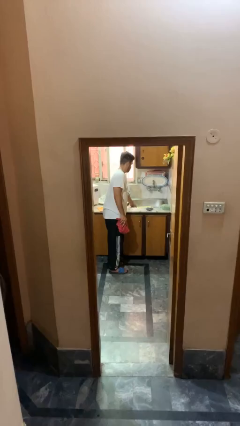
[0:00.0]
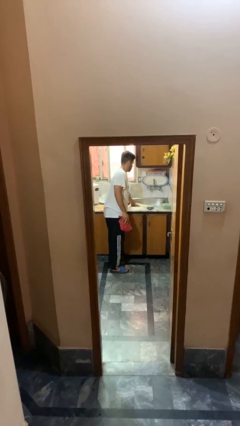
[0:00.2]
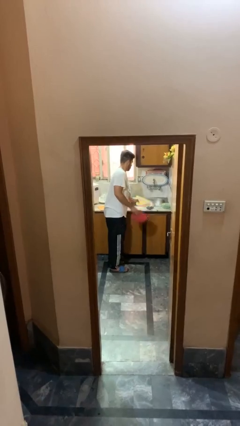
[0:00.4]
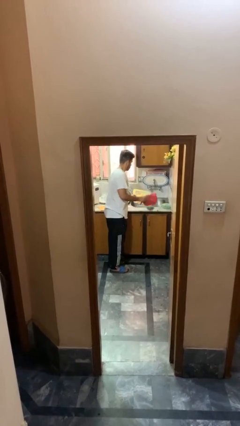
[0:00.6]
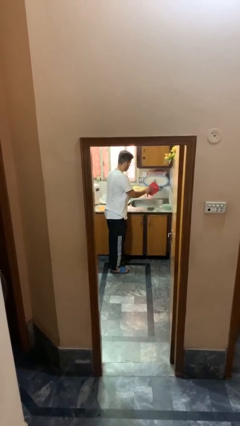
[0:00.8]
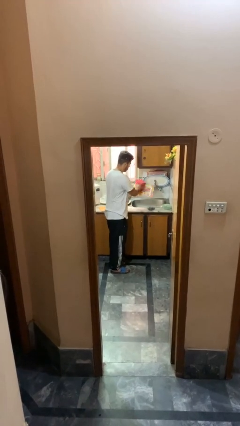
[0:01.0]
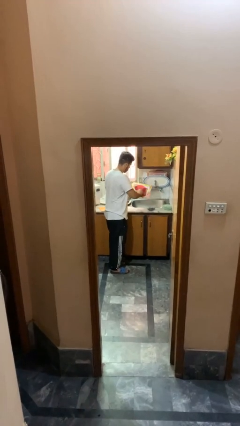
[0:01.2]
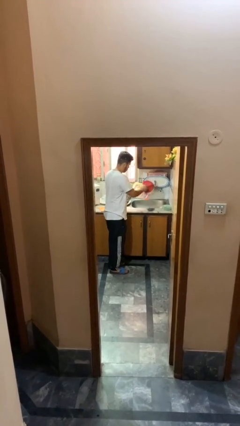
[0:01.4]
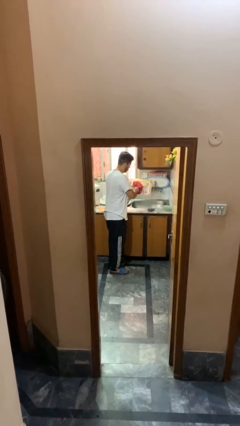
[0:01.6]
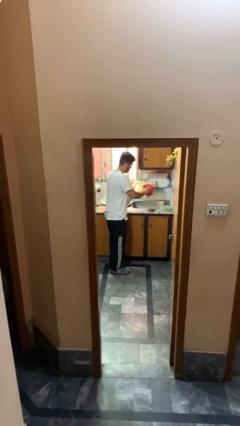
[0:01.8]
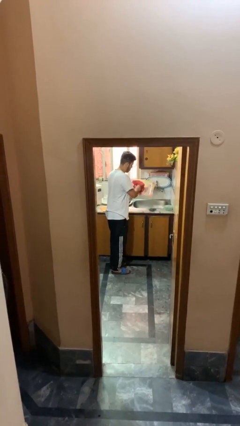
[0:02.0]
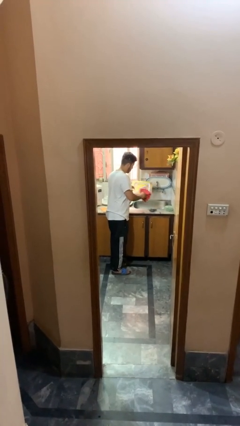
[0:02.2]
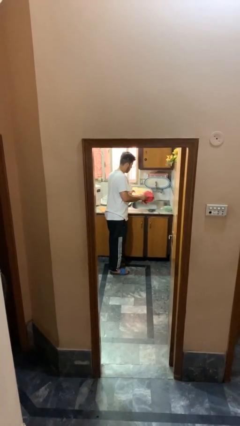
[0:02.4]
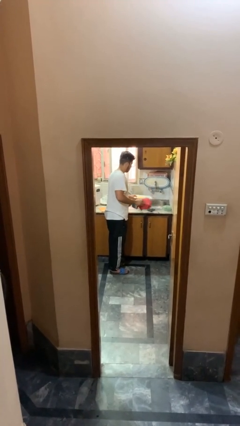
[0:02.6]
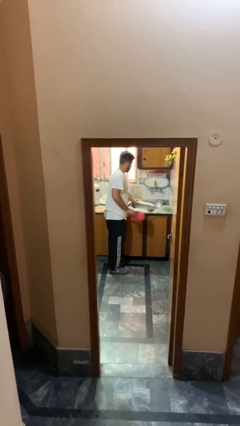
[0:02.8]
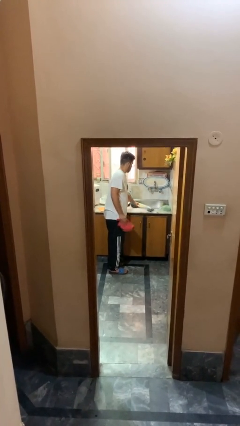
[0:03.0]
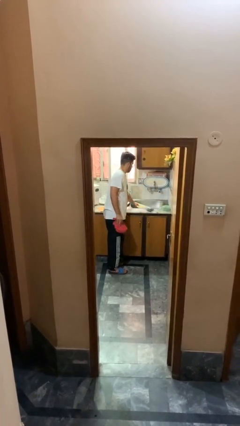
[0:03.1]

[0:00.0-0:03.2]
person dries dish

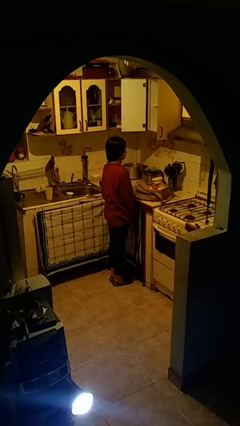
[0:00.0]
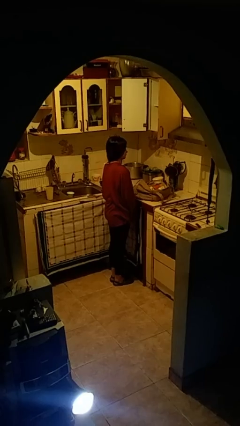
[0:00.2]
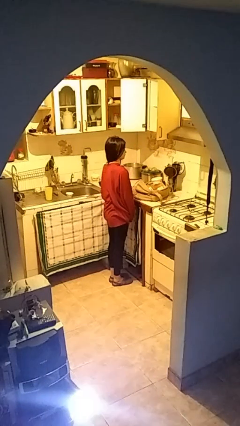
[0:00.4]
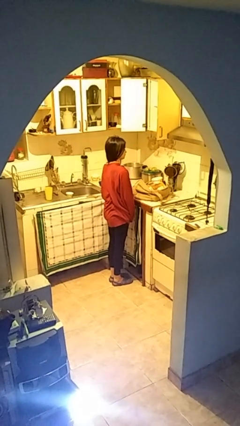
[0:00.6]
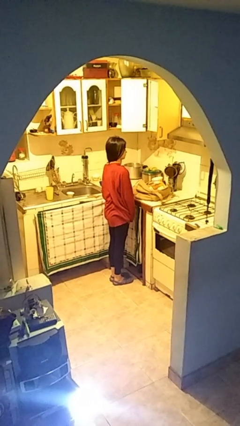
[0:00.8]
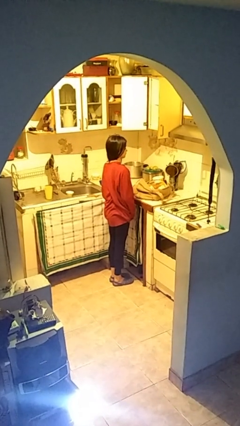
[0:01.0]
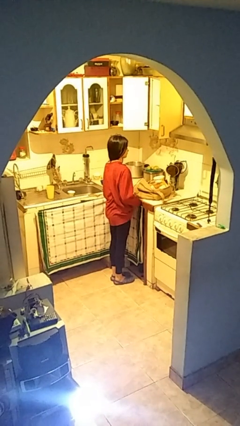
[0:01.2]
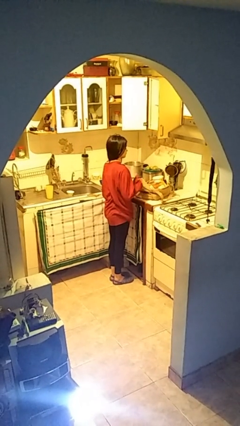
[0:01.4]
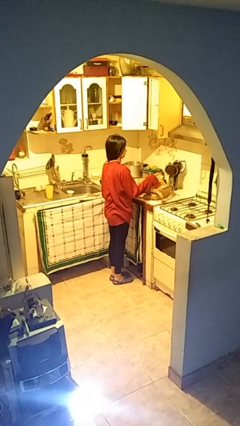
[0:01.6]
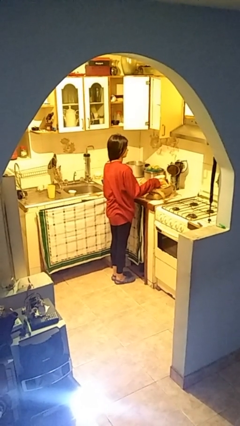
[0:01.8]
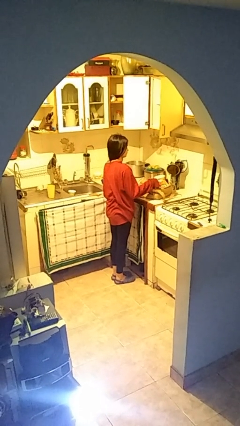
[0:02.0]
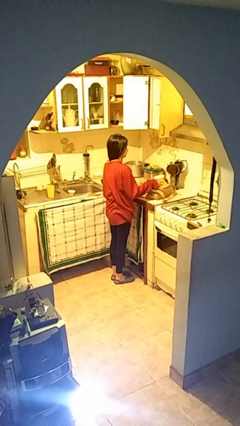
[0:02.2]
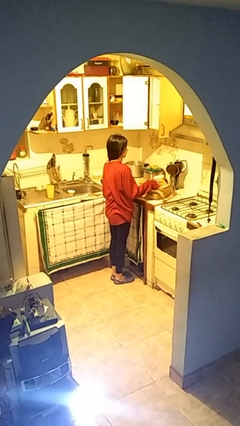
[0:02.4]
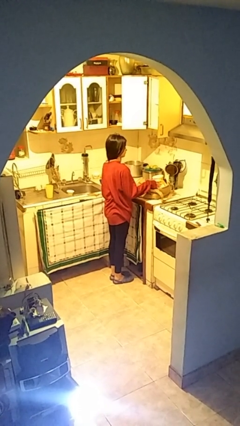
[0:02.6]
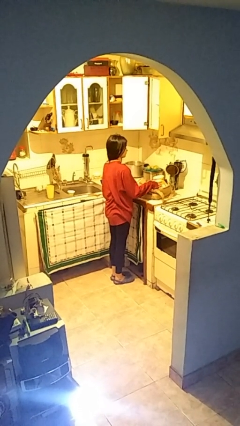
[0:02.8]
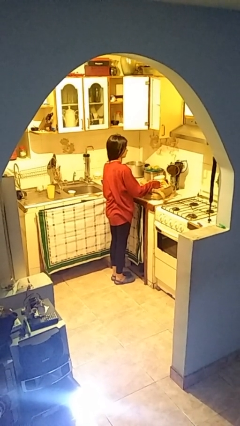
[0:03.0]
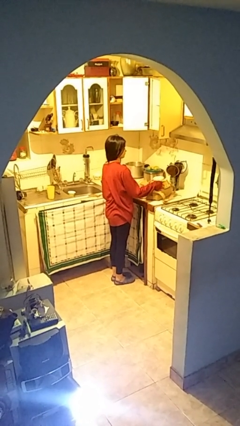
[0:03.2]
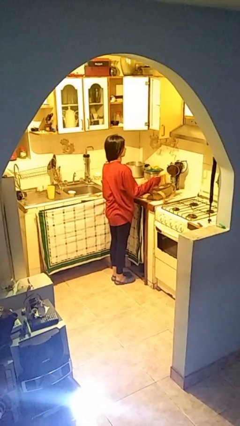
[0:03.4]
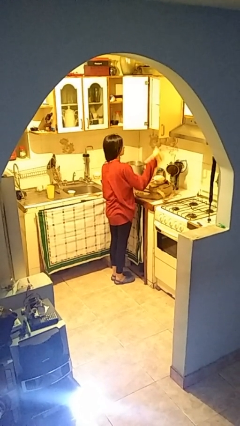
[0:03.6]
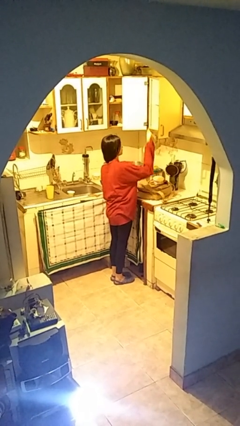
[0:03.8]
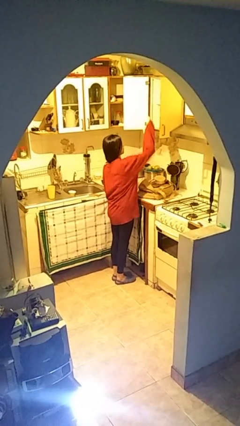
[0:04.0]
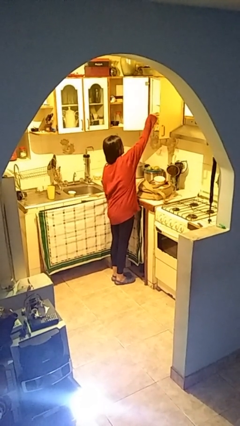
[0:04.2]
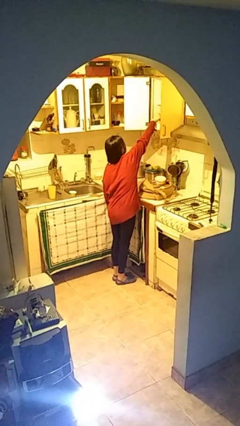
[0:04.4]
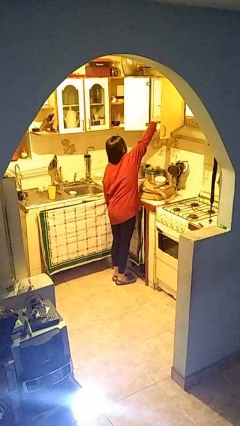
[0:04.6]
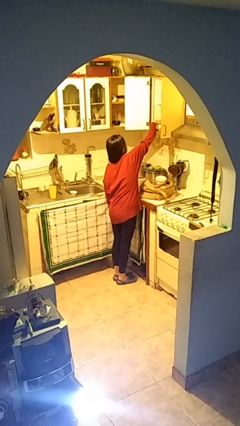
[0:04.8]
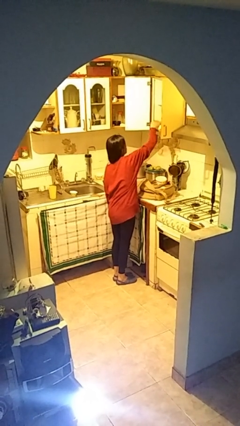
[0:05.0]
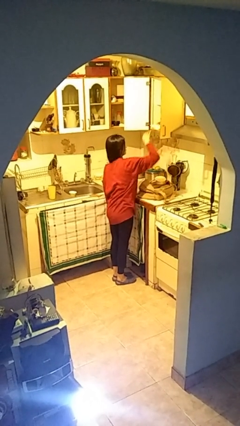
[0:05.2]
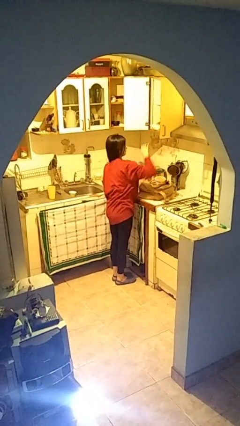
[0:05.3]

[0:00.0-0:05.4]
person loads groceries into cabinet

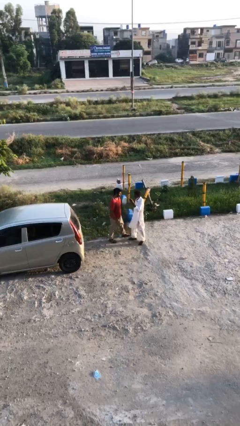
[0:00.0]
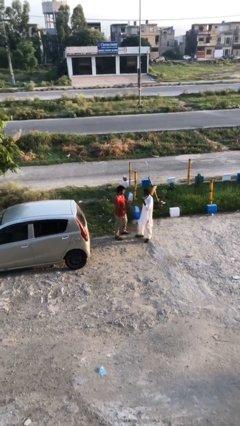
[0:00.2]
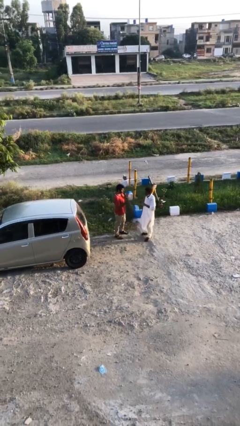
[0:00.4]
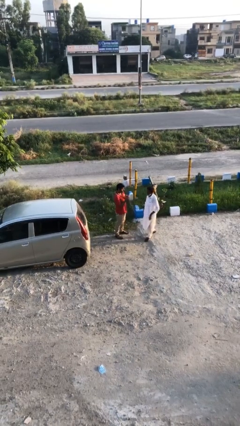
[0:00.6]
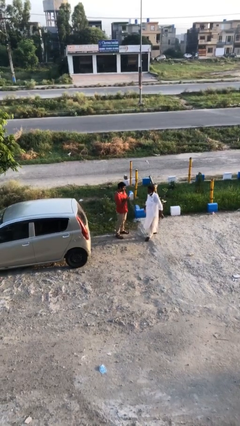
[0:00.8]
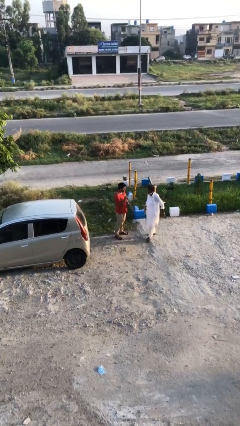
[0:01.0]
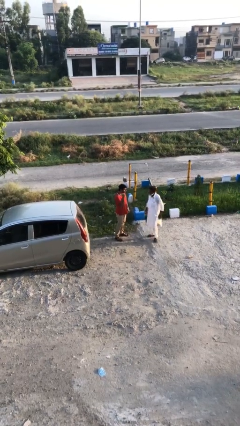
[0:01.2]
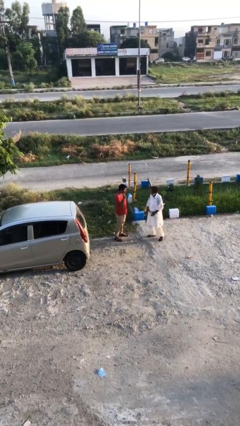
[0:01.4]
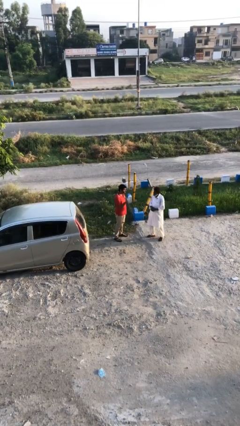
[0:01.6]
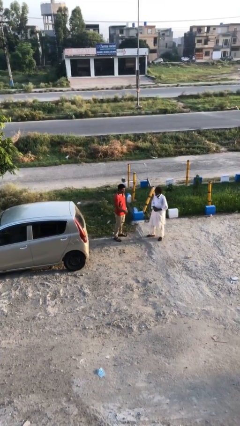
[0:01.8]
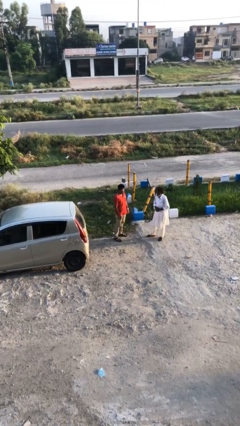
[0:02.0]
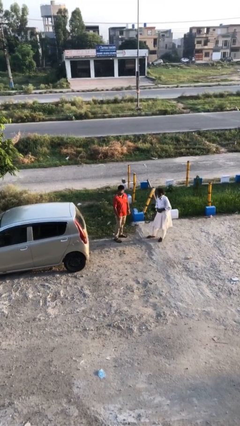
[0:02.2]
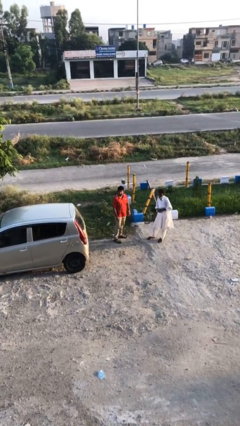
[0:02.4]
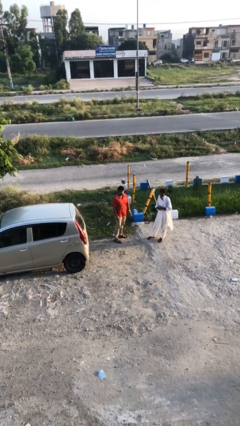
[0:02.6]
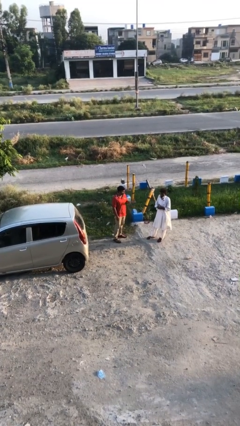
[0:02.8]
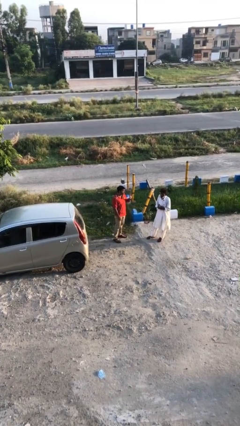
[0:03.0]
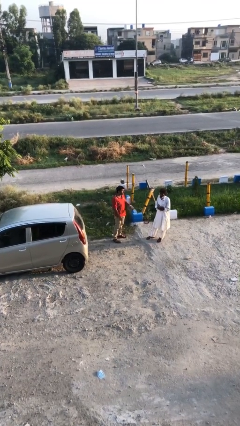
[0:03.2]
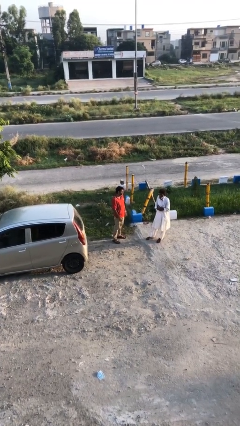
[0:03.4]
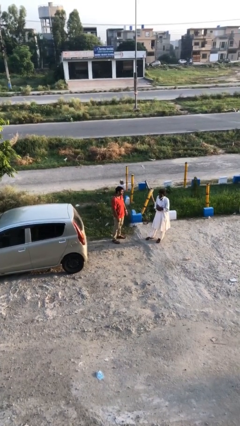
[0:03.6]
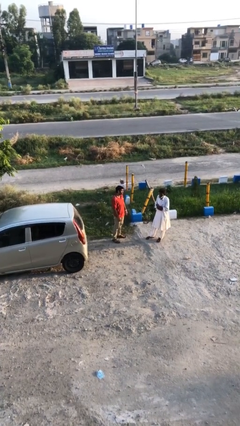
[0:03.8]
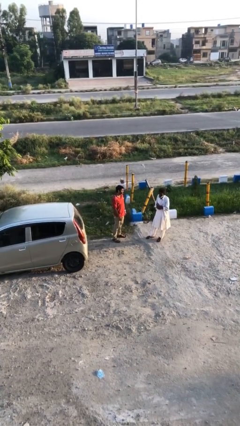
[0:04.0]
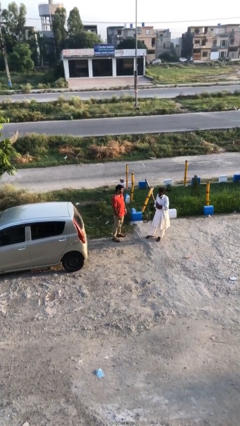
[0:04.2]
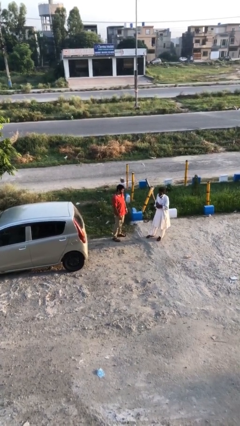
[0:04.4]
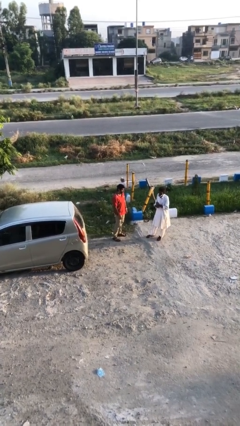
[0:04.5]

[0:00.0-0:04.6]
person talks to person

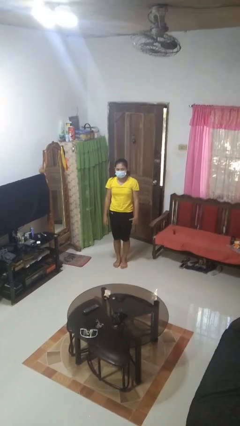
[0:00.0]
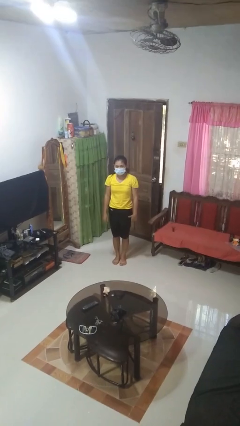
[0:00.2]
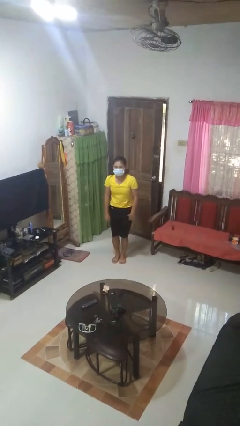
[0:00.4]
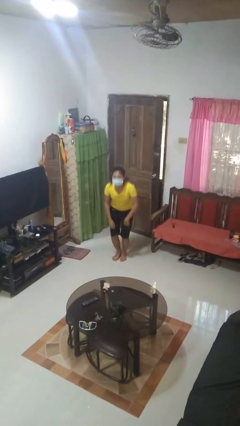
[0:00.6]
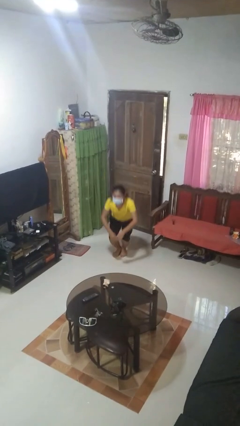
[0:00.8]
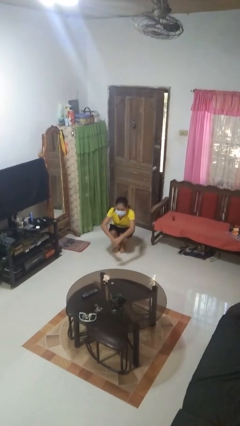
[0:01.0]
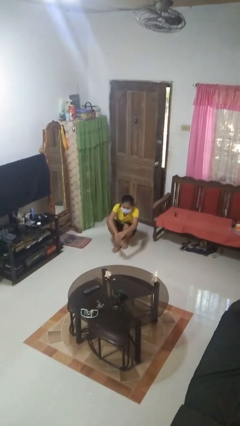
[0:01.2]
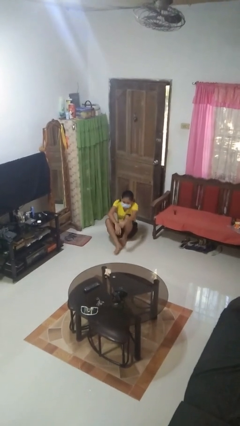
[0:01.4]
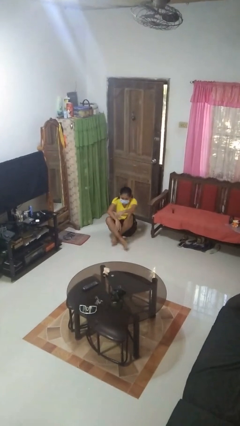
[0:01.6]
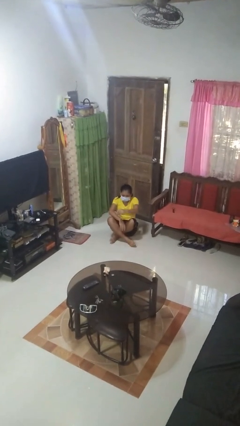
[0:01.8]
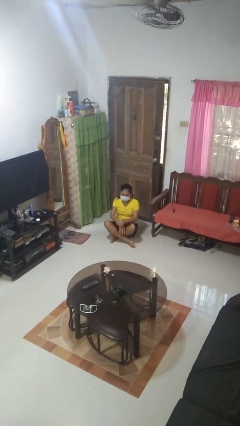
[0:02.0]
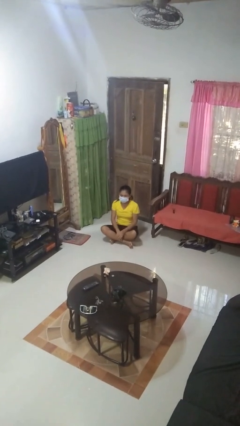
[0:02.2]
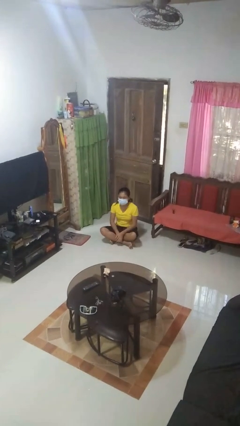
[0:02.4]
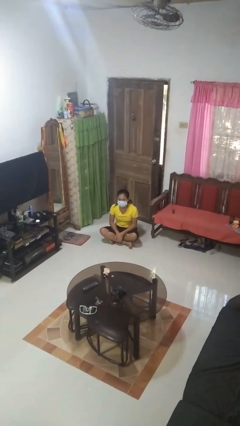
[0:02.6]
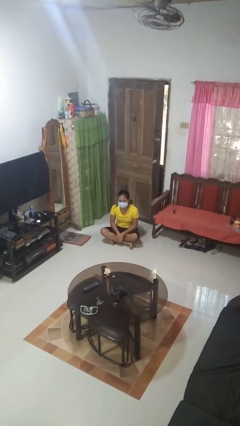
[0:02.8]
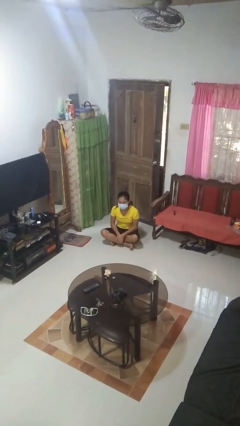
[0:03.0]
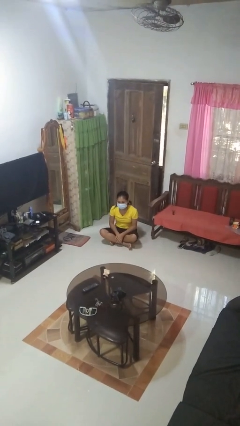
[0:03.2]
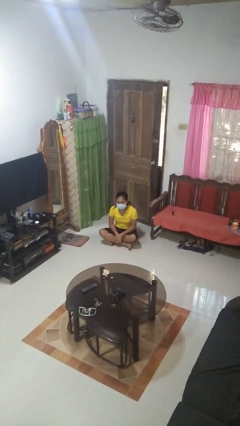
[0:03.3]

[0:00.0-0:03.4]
person sits crisscross

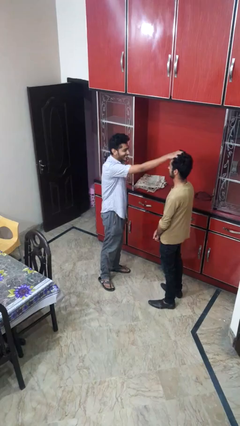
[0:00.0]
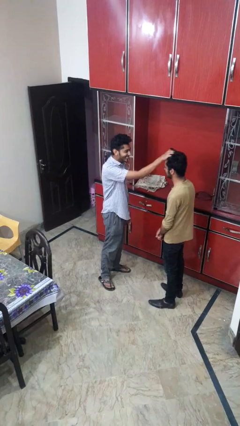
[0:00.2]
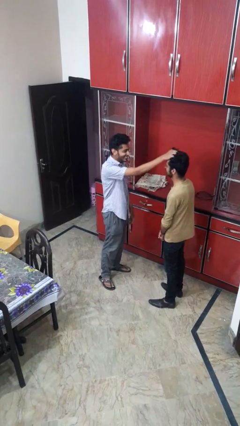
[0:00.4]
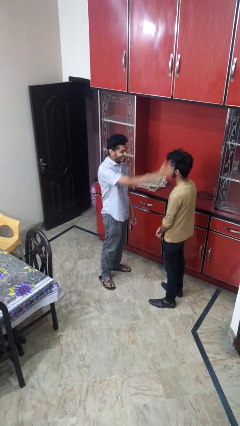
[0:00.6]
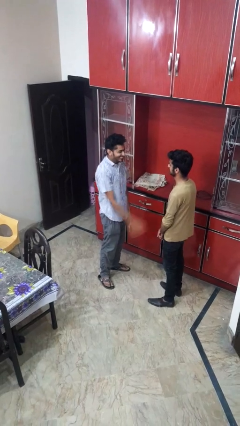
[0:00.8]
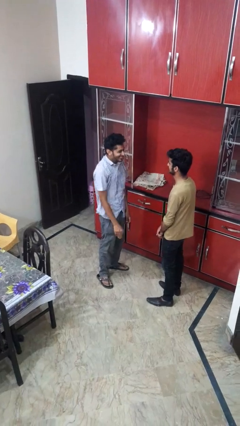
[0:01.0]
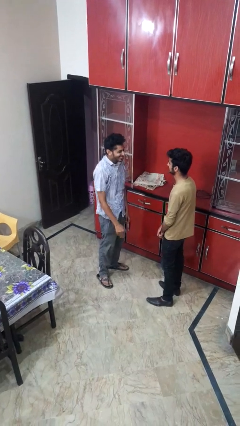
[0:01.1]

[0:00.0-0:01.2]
person grabs person by hair

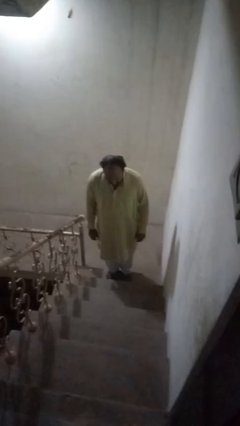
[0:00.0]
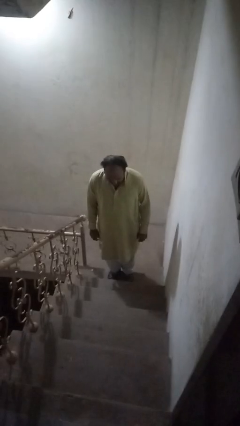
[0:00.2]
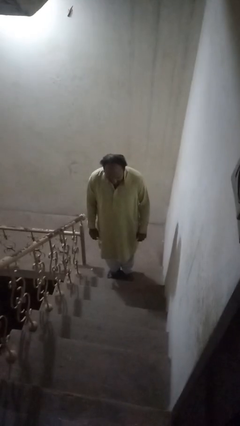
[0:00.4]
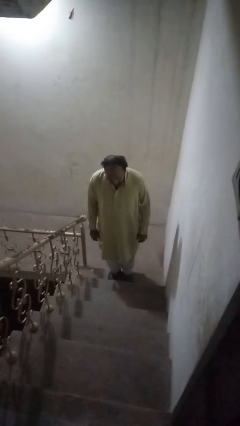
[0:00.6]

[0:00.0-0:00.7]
person climbs up ladder
